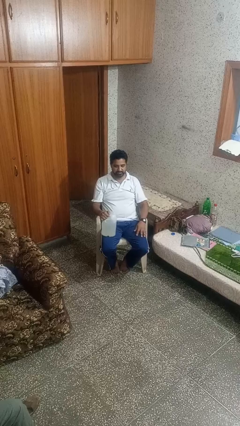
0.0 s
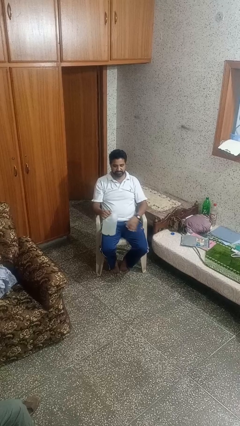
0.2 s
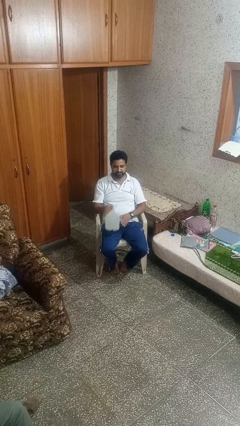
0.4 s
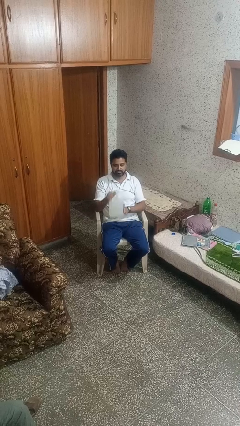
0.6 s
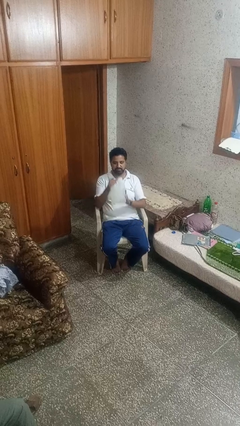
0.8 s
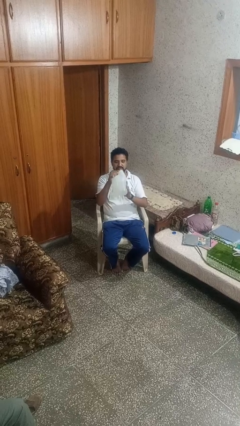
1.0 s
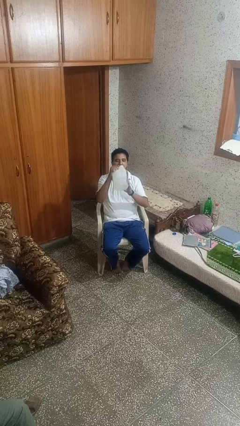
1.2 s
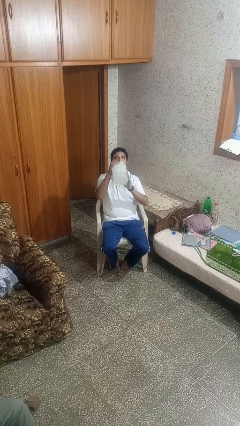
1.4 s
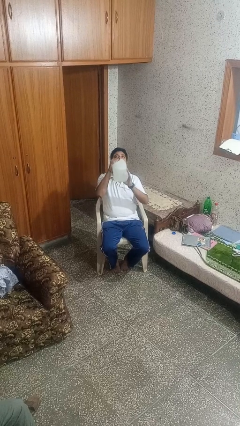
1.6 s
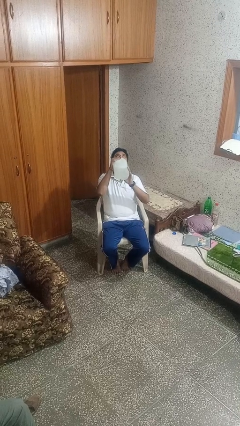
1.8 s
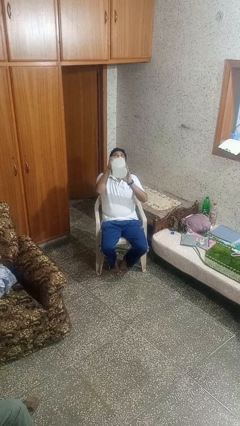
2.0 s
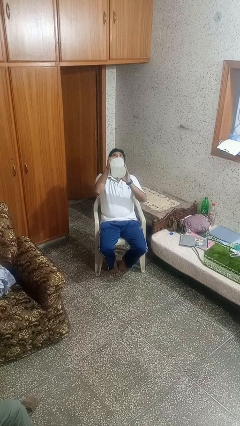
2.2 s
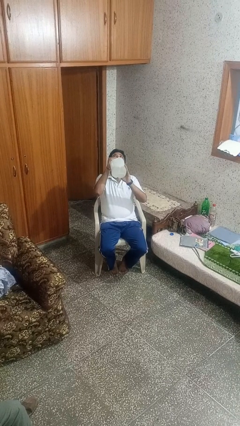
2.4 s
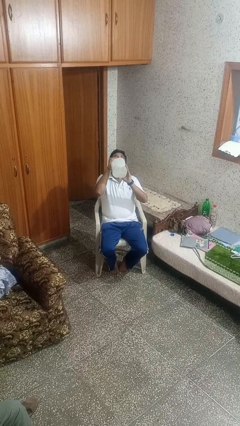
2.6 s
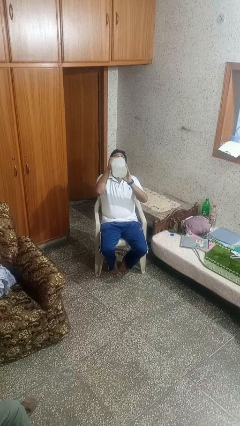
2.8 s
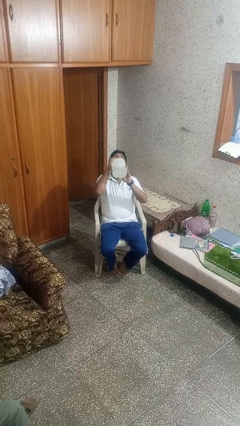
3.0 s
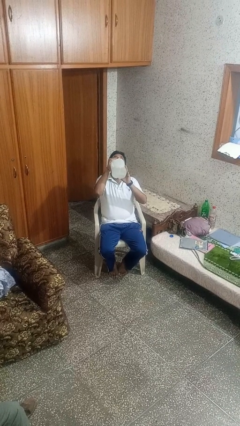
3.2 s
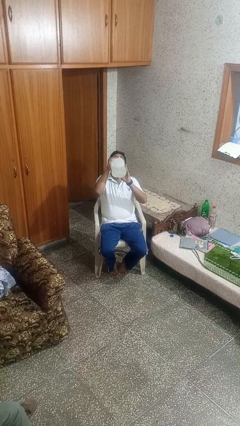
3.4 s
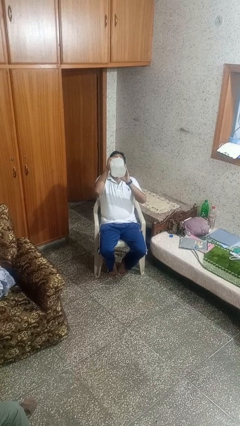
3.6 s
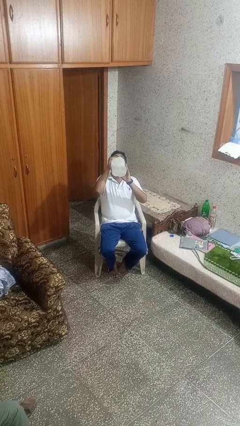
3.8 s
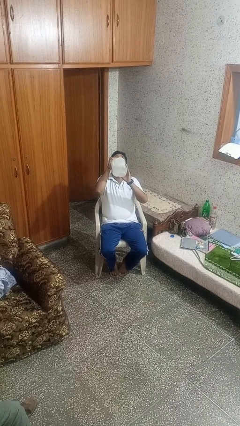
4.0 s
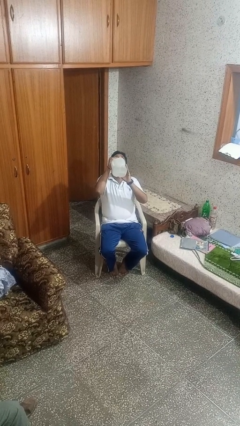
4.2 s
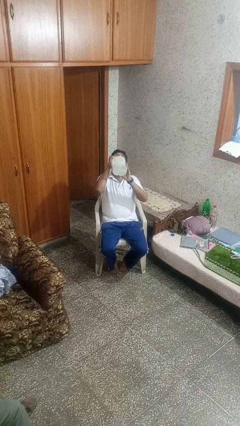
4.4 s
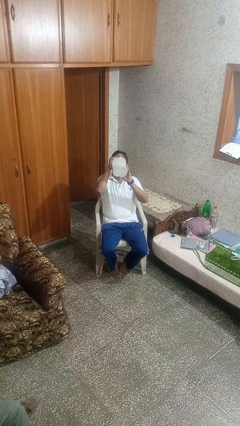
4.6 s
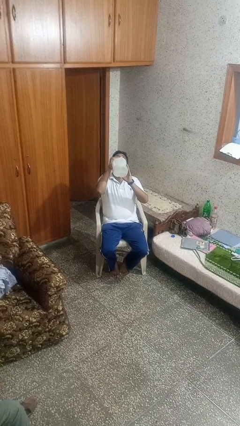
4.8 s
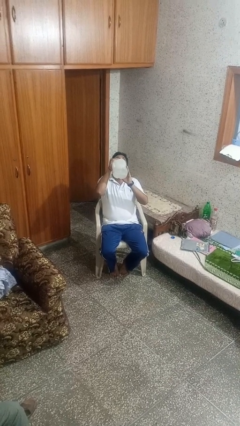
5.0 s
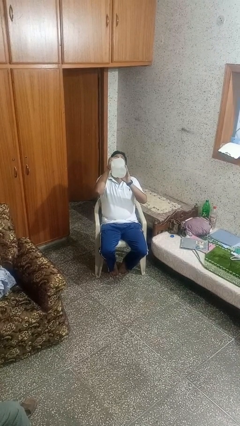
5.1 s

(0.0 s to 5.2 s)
person drinks from bottle

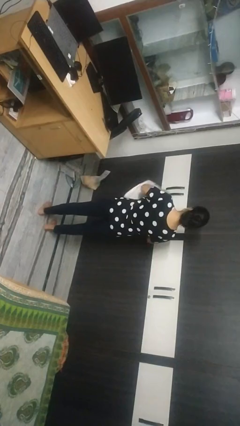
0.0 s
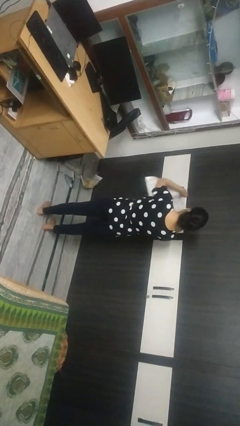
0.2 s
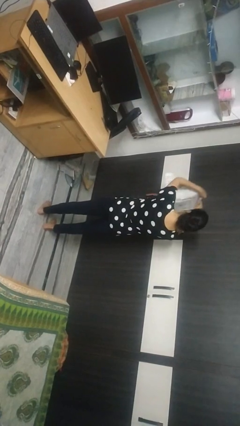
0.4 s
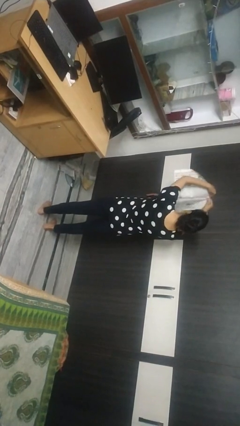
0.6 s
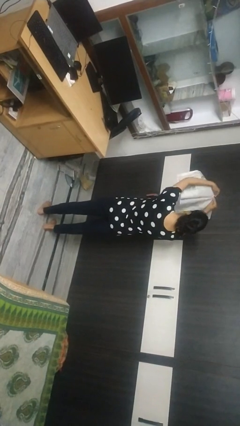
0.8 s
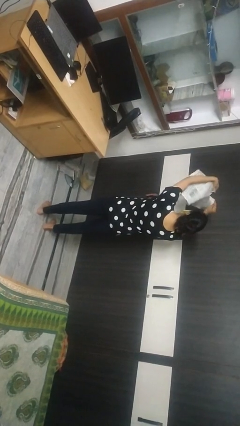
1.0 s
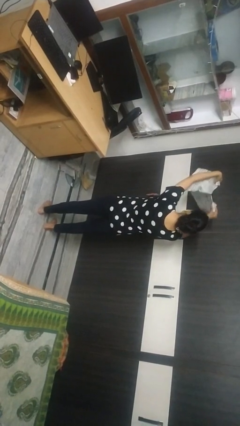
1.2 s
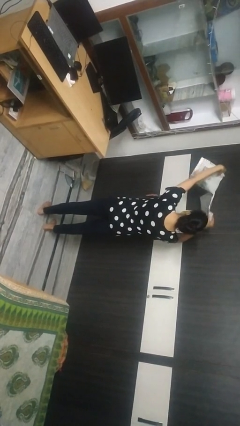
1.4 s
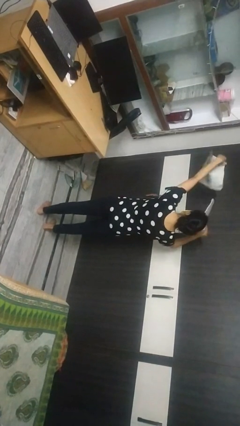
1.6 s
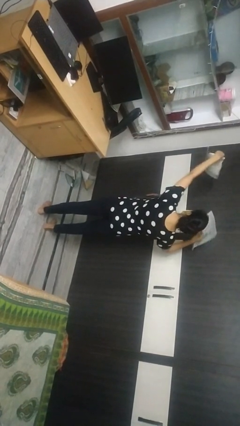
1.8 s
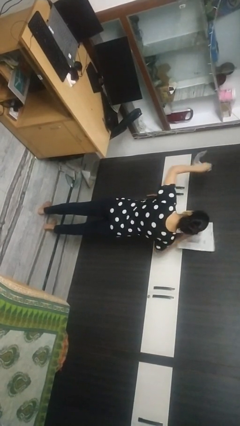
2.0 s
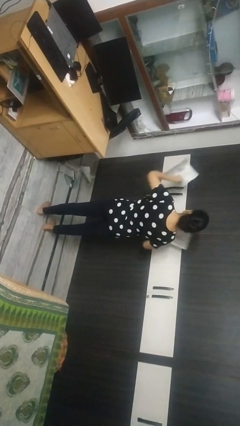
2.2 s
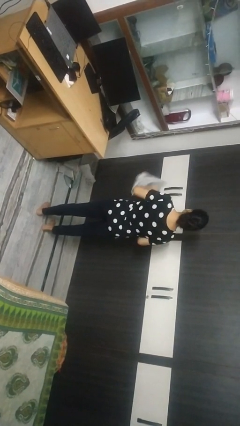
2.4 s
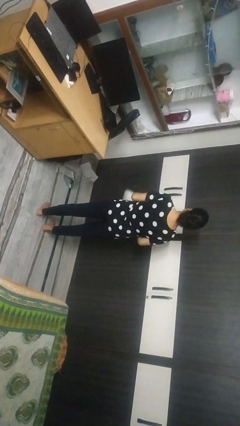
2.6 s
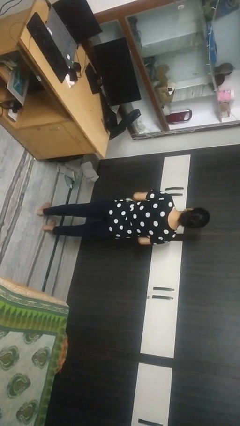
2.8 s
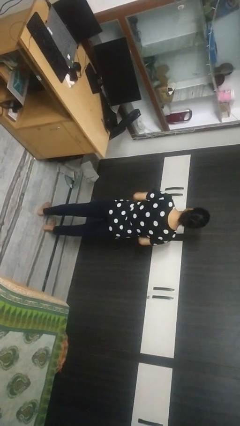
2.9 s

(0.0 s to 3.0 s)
person tears paper

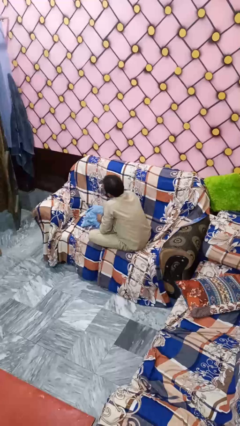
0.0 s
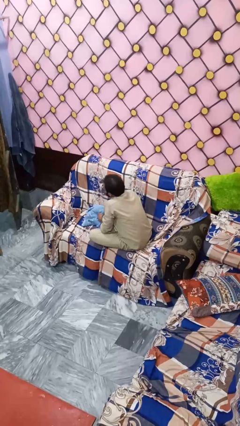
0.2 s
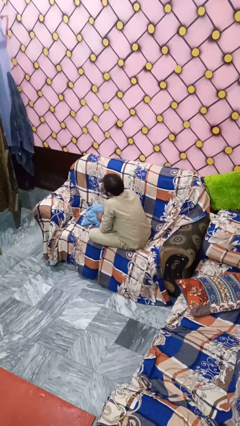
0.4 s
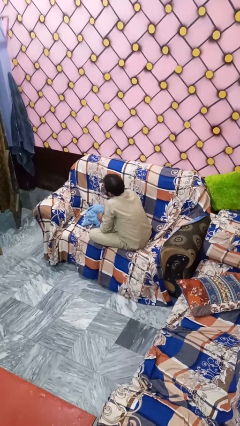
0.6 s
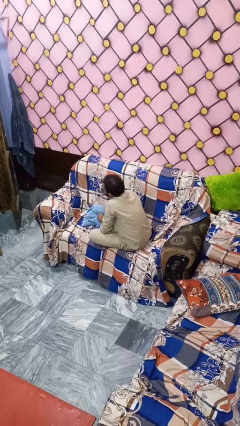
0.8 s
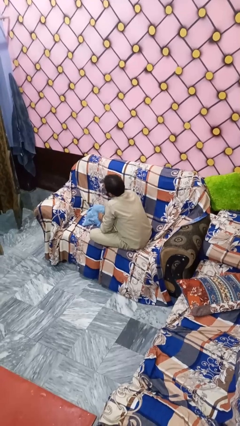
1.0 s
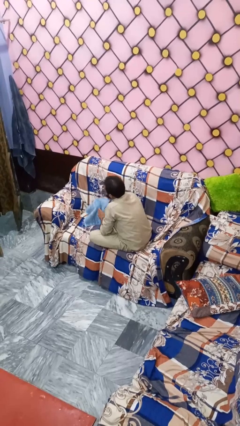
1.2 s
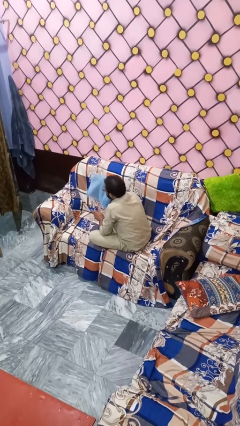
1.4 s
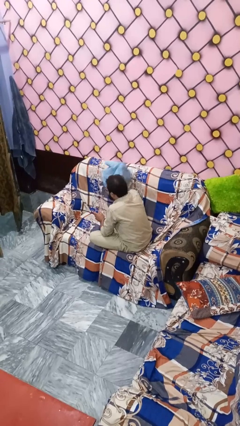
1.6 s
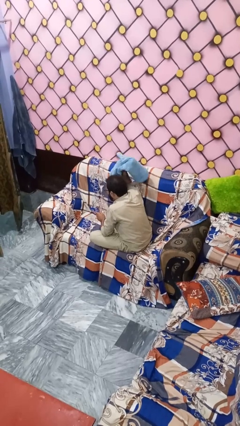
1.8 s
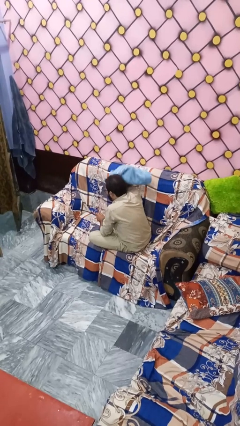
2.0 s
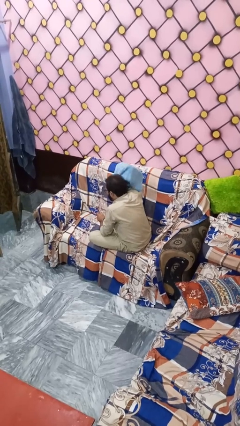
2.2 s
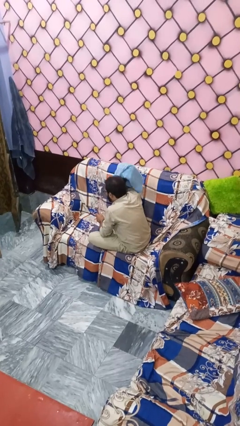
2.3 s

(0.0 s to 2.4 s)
person dries hair with towel

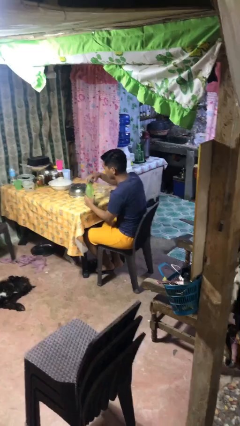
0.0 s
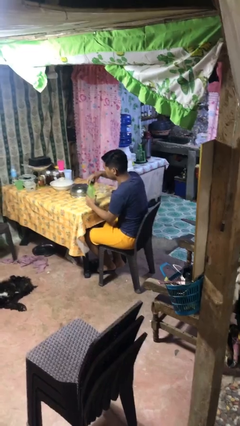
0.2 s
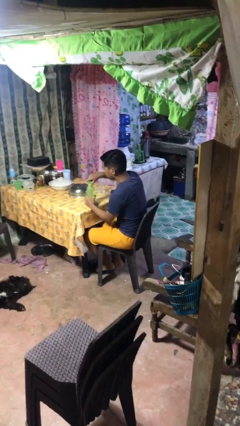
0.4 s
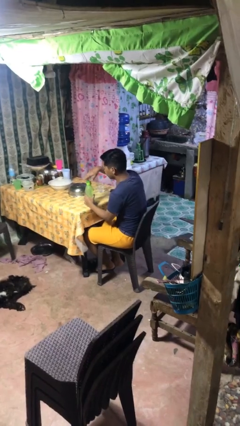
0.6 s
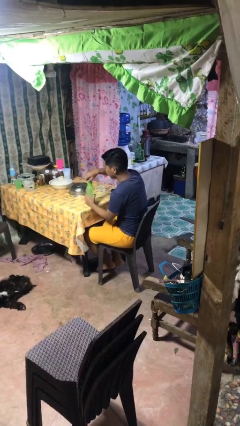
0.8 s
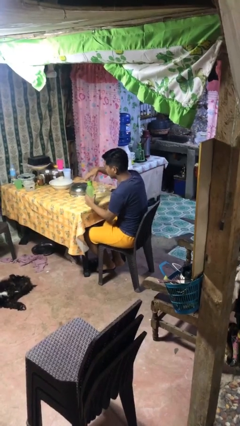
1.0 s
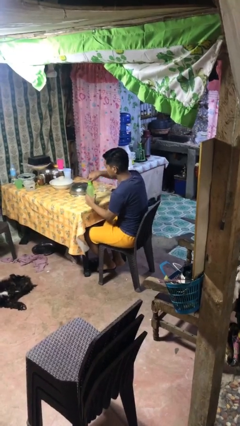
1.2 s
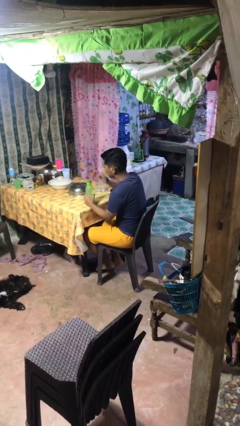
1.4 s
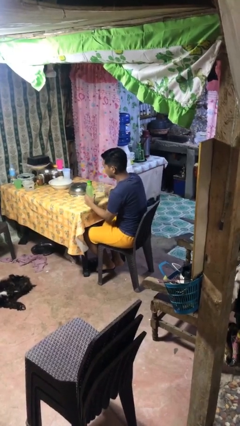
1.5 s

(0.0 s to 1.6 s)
person screws lid to bottle

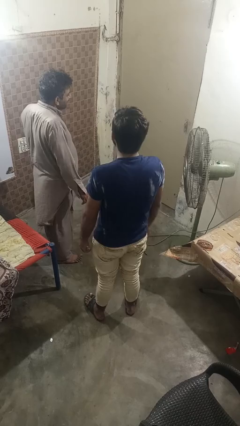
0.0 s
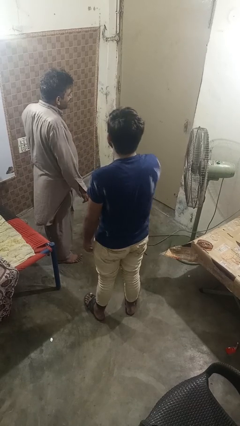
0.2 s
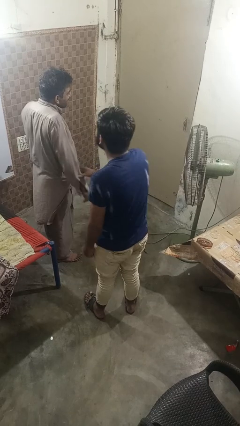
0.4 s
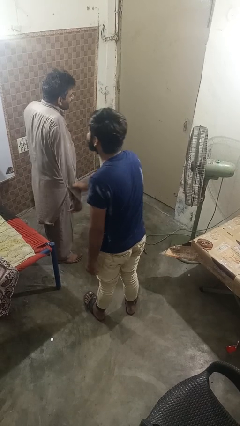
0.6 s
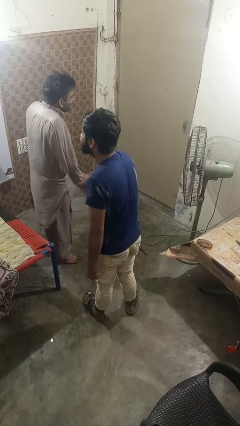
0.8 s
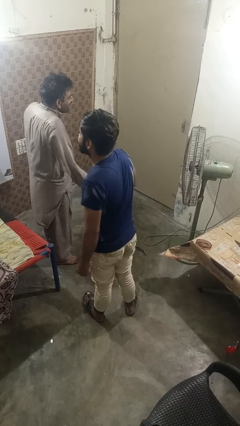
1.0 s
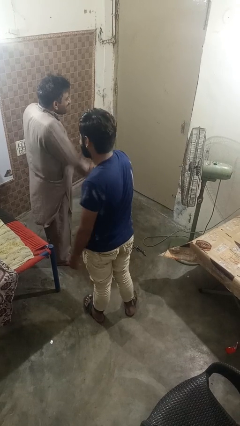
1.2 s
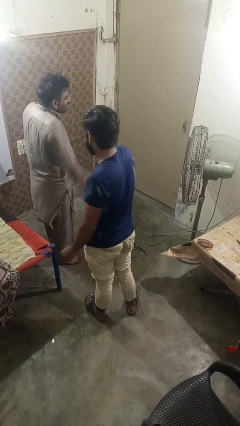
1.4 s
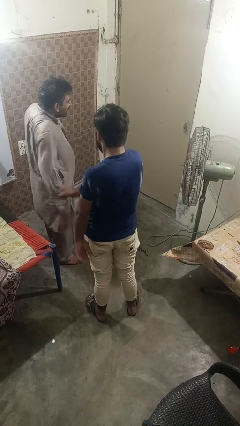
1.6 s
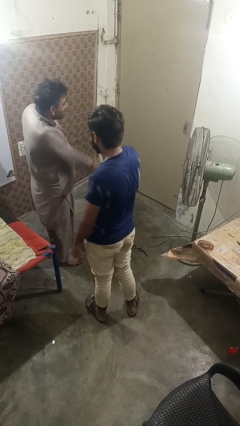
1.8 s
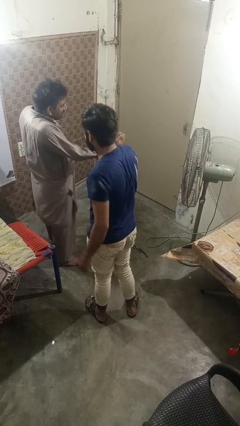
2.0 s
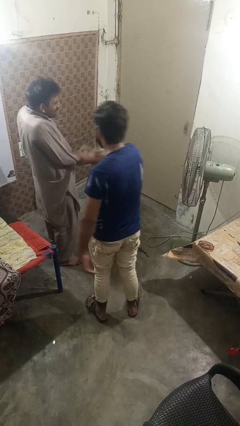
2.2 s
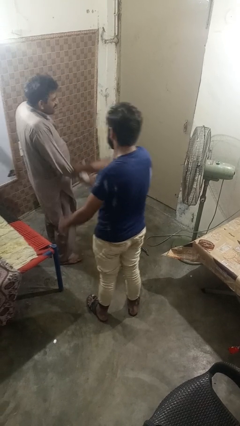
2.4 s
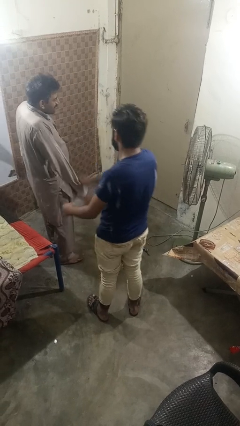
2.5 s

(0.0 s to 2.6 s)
person grabs person by forearm

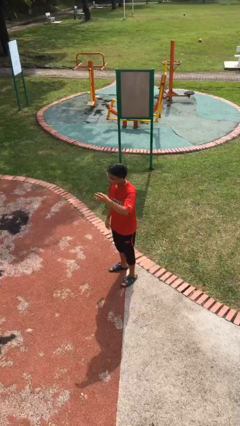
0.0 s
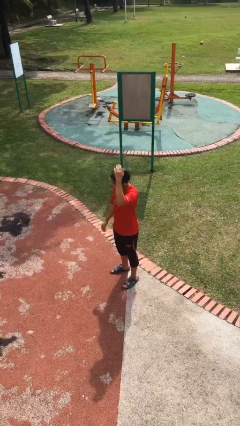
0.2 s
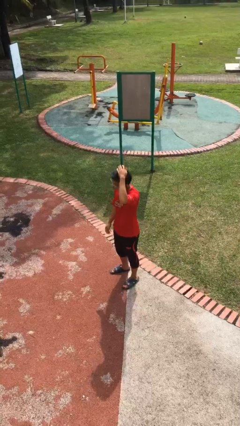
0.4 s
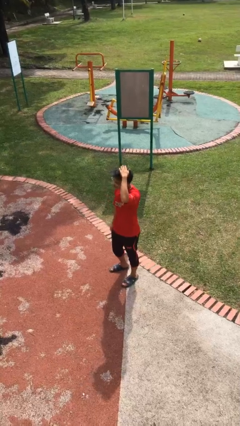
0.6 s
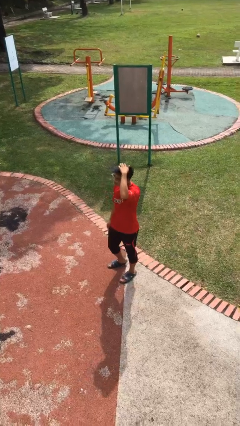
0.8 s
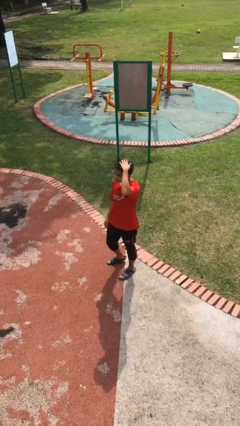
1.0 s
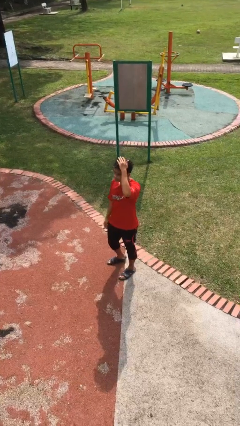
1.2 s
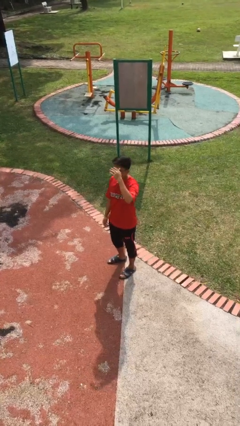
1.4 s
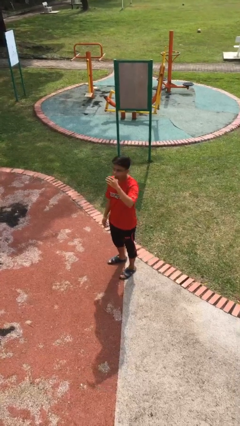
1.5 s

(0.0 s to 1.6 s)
person pats head

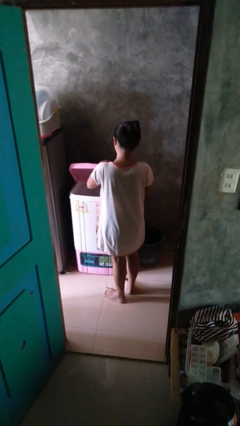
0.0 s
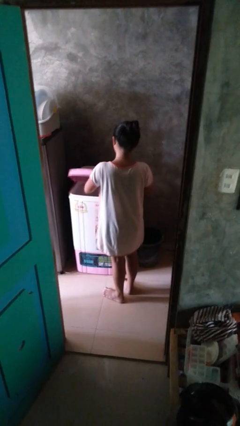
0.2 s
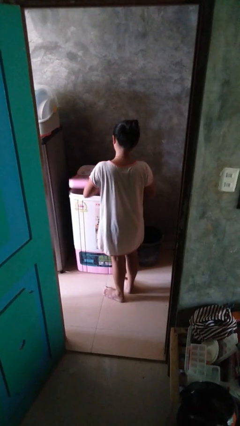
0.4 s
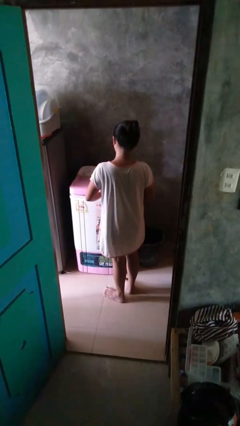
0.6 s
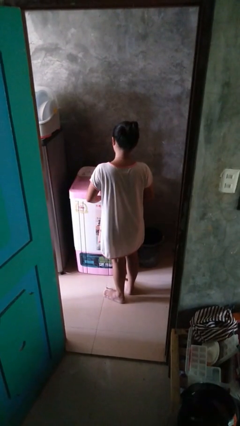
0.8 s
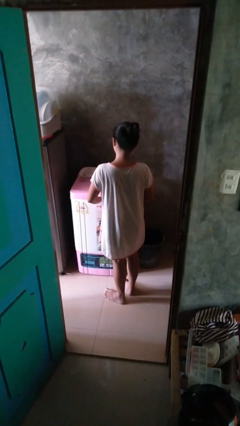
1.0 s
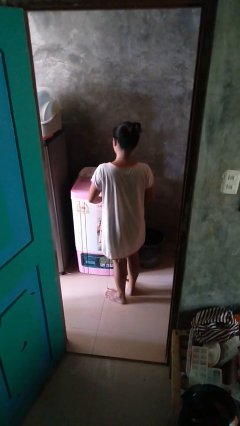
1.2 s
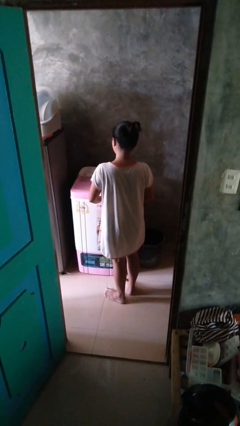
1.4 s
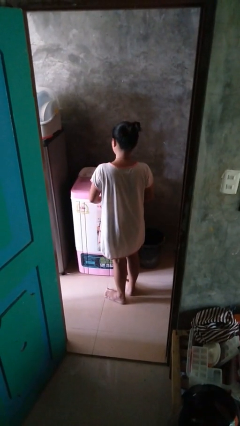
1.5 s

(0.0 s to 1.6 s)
person closes clothes washer
